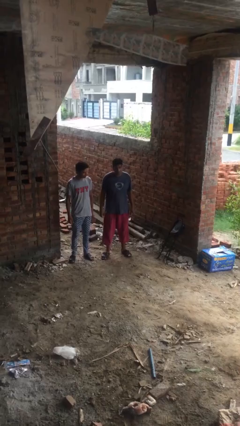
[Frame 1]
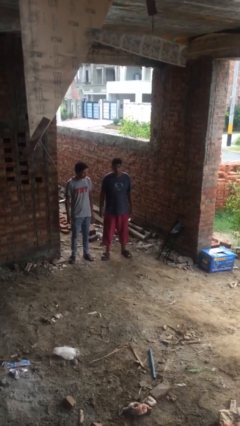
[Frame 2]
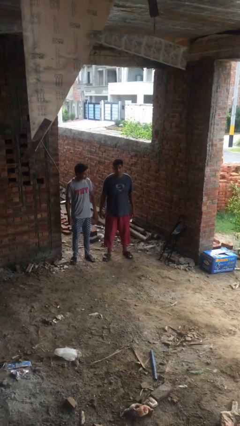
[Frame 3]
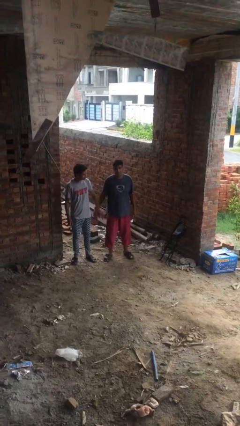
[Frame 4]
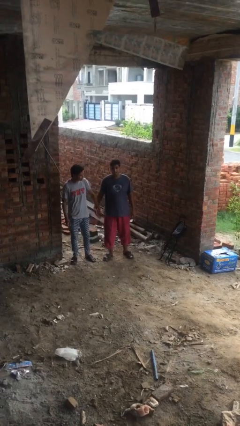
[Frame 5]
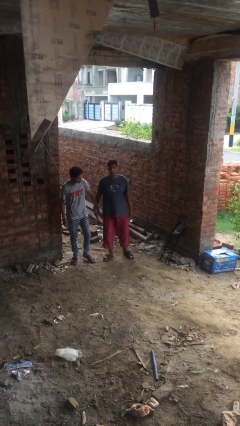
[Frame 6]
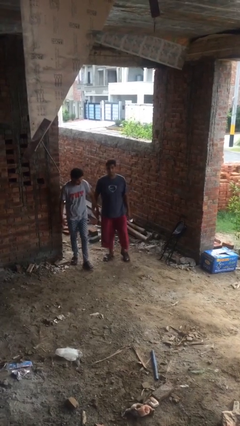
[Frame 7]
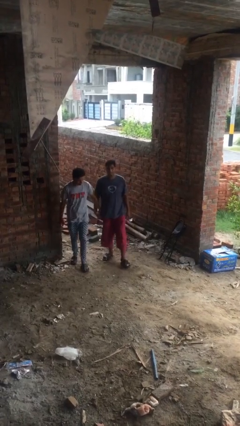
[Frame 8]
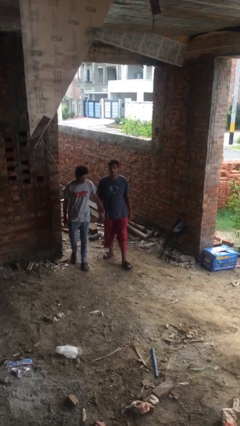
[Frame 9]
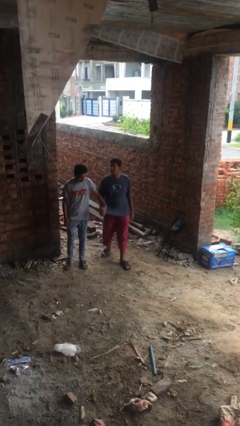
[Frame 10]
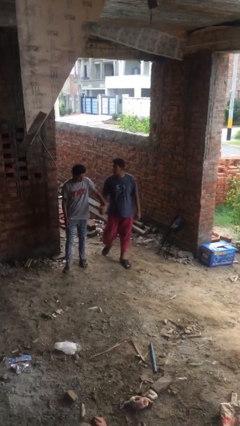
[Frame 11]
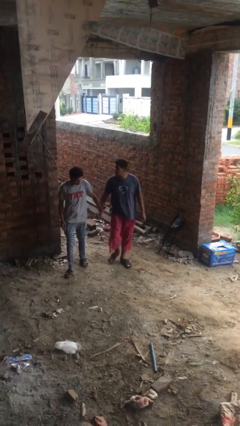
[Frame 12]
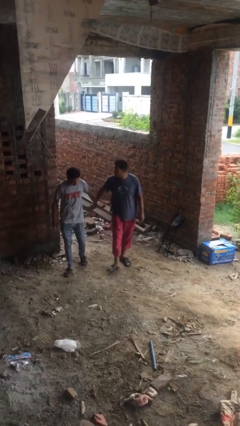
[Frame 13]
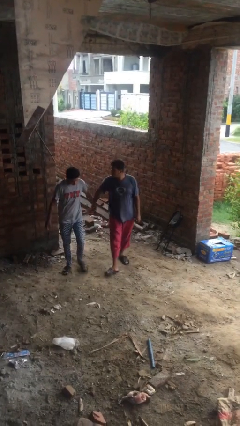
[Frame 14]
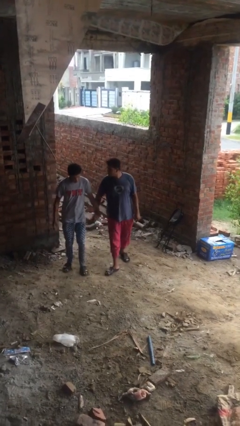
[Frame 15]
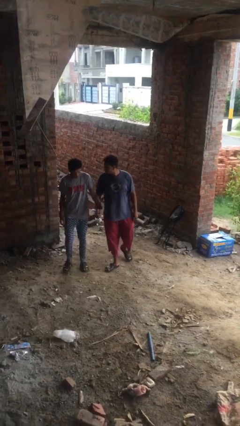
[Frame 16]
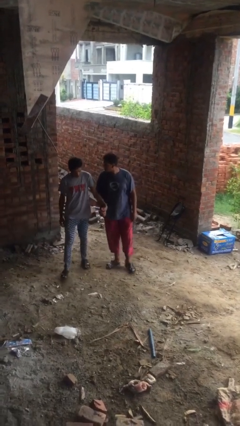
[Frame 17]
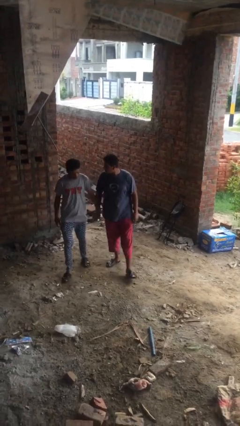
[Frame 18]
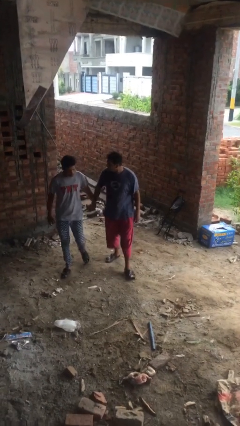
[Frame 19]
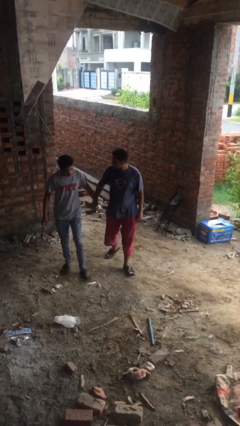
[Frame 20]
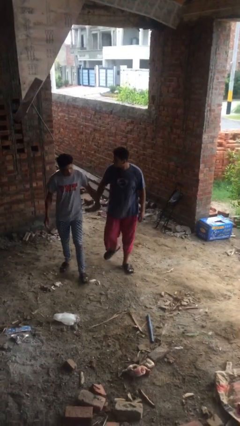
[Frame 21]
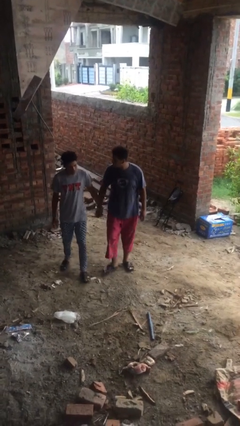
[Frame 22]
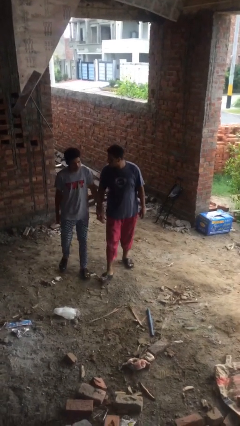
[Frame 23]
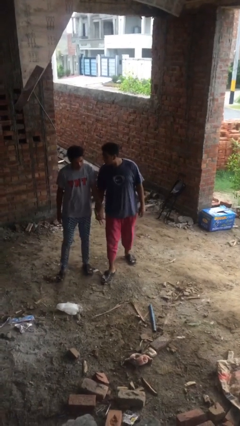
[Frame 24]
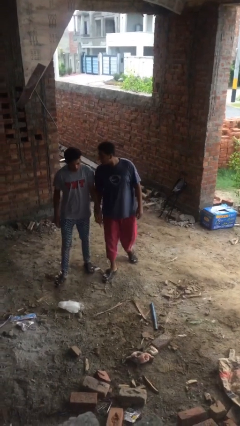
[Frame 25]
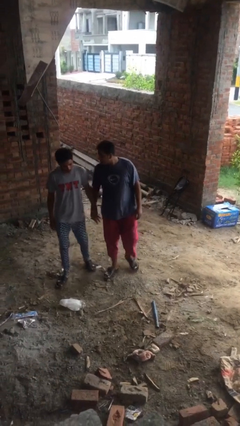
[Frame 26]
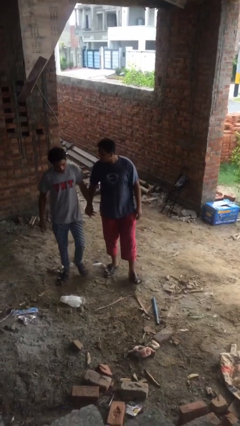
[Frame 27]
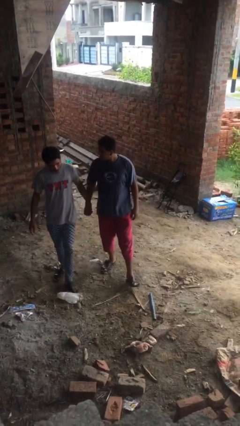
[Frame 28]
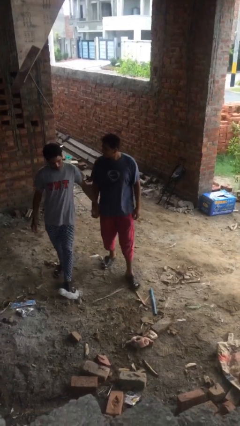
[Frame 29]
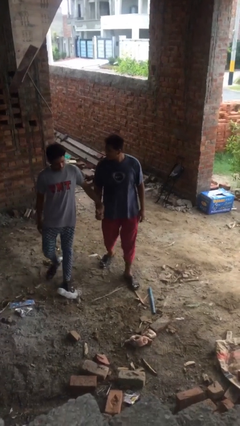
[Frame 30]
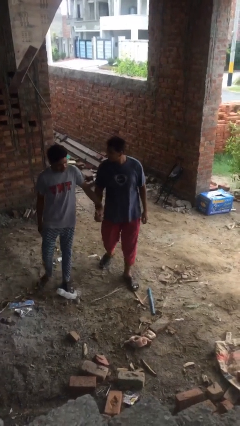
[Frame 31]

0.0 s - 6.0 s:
person holds hand

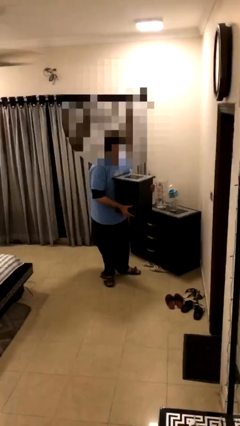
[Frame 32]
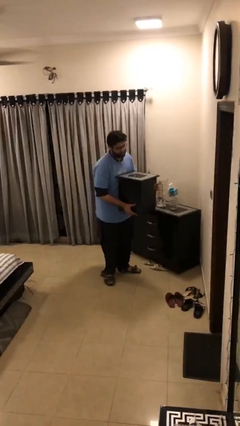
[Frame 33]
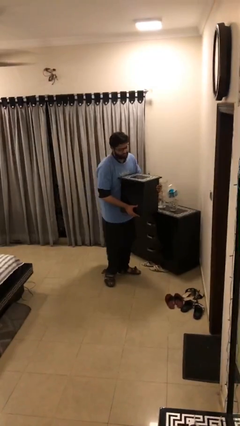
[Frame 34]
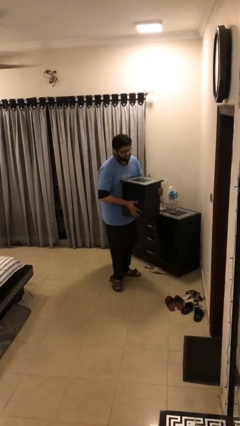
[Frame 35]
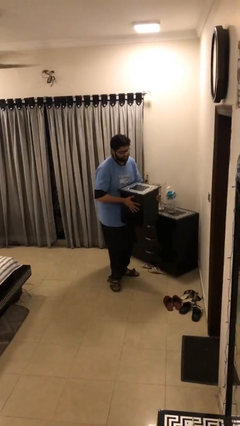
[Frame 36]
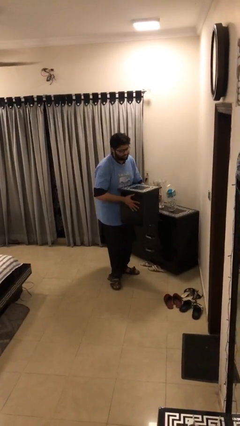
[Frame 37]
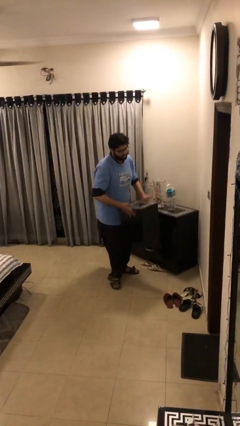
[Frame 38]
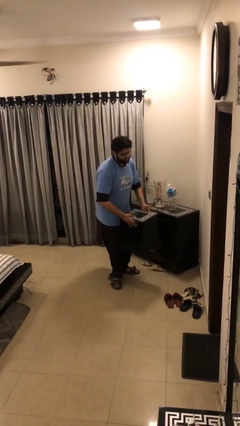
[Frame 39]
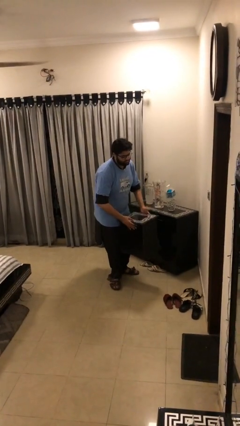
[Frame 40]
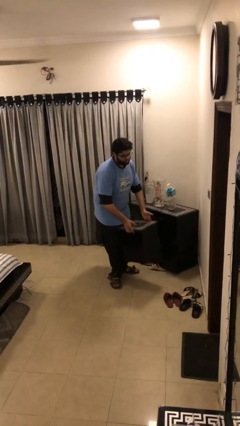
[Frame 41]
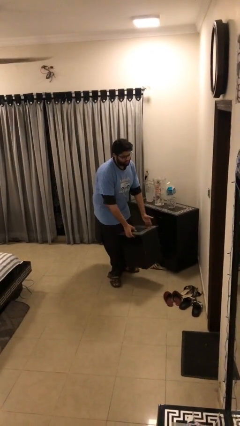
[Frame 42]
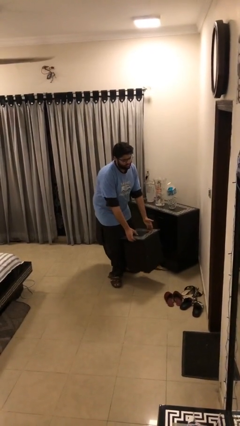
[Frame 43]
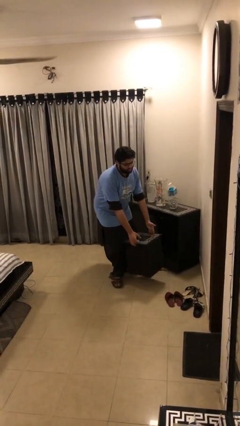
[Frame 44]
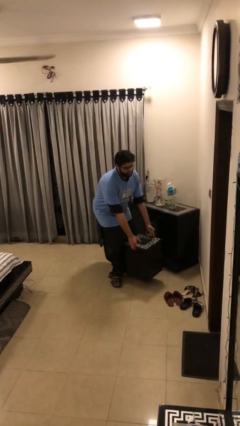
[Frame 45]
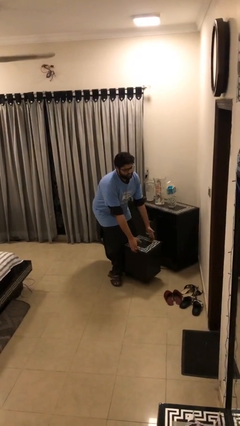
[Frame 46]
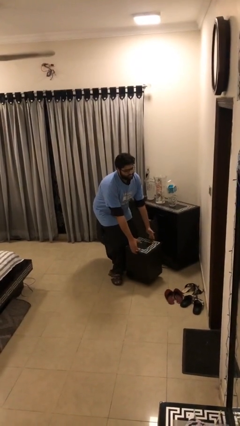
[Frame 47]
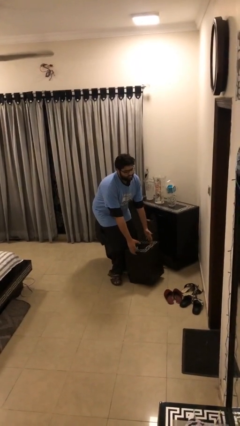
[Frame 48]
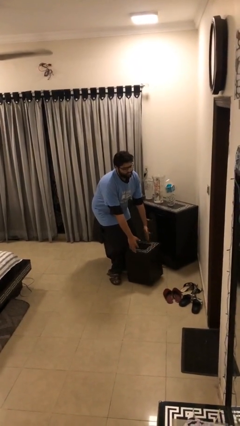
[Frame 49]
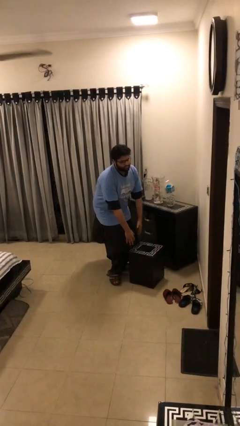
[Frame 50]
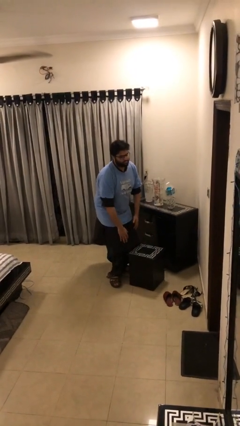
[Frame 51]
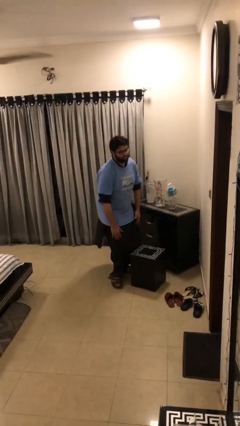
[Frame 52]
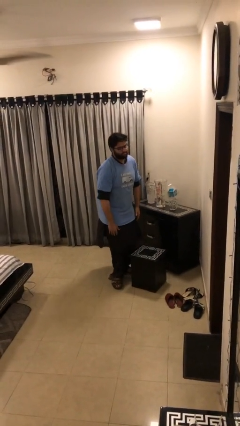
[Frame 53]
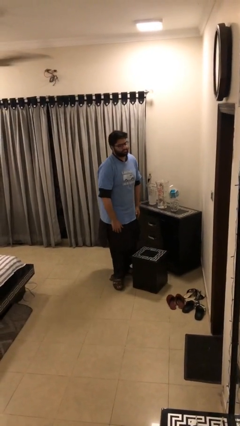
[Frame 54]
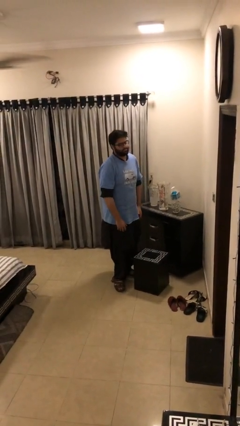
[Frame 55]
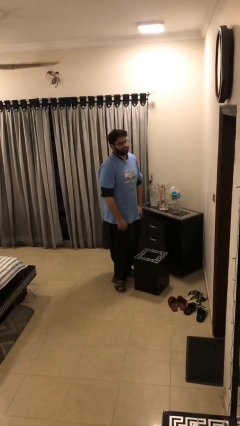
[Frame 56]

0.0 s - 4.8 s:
person puts down object on floor

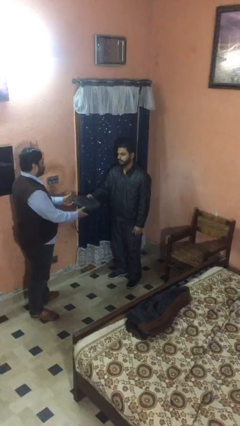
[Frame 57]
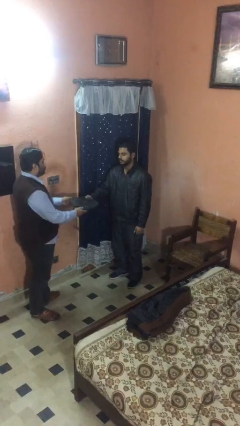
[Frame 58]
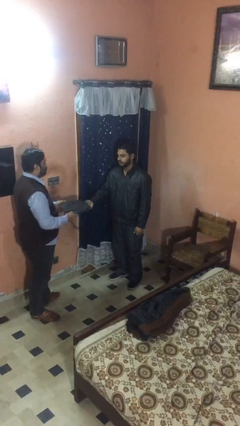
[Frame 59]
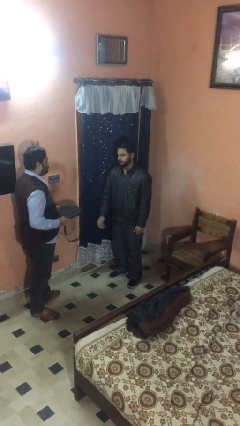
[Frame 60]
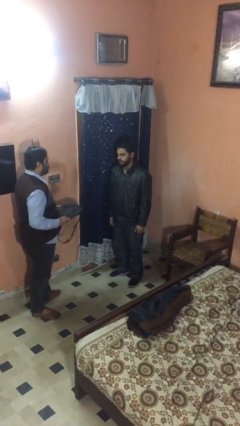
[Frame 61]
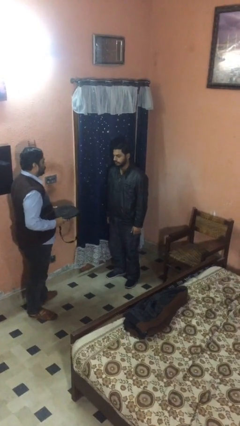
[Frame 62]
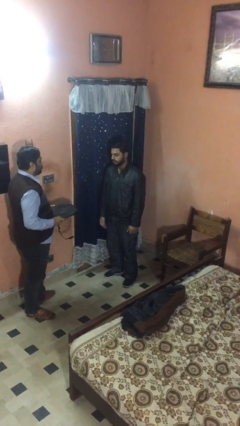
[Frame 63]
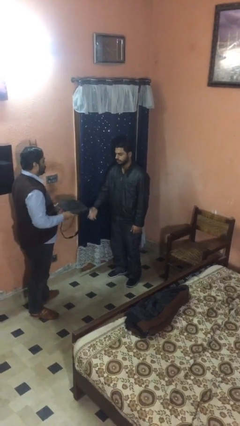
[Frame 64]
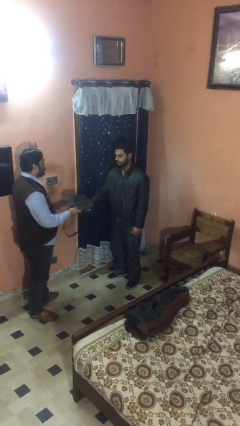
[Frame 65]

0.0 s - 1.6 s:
person transfers object to person

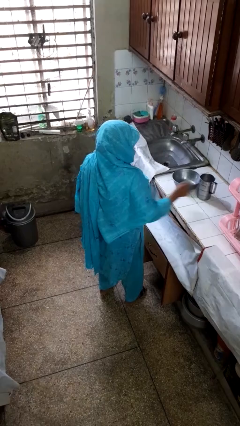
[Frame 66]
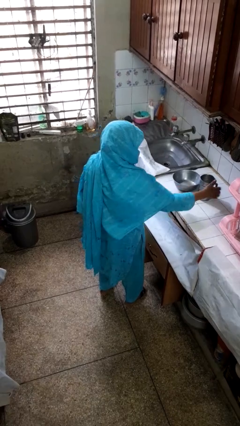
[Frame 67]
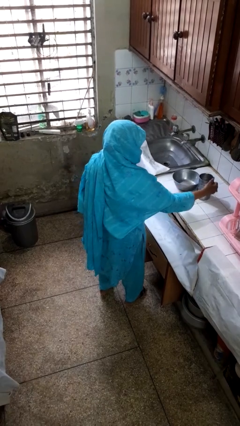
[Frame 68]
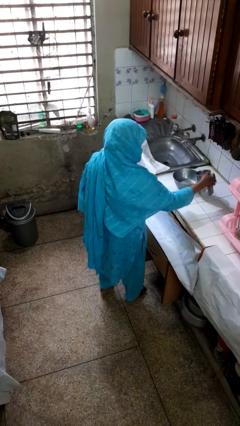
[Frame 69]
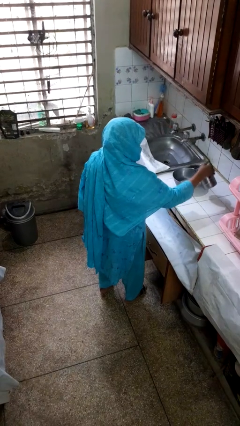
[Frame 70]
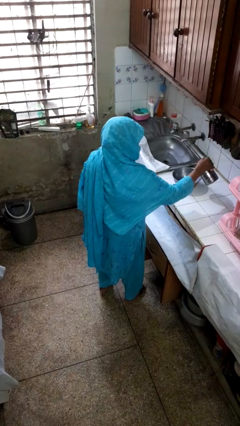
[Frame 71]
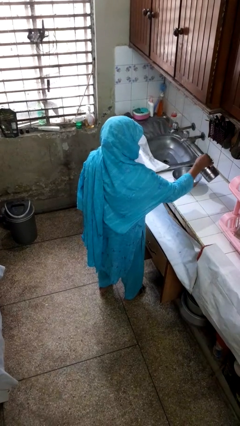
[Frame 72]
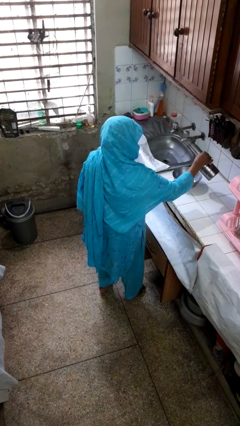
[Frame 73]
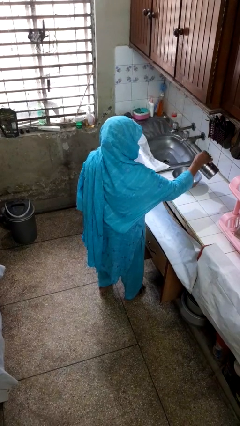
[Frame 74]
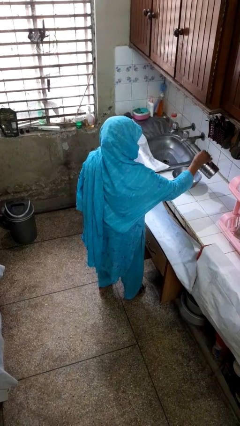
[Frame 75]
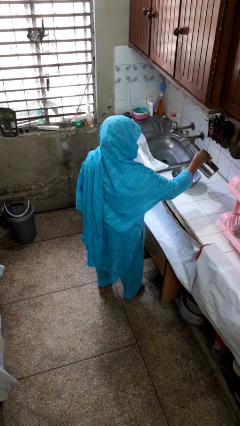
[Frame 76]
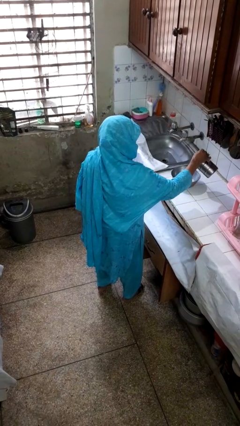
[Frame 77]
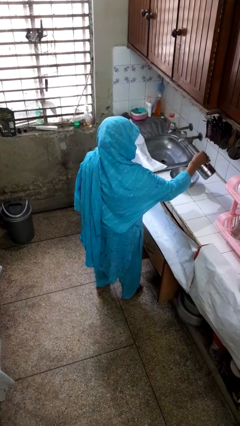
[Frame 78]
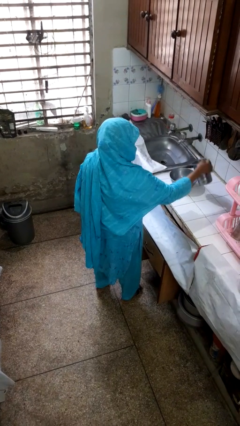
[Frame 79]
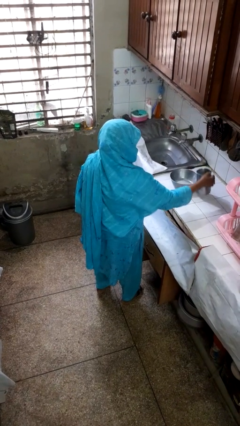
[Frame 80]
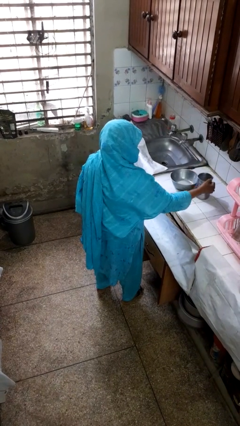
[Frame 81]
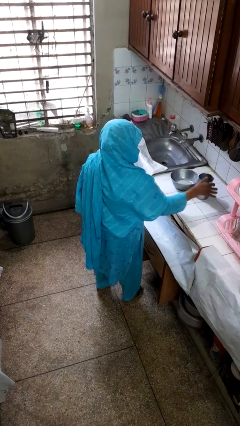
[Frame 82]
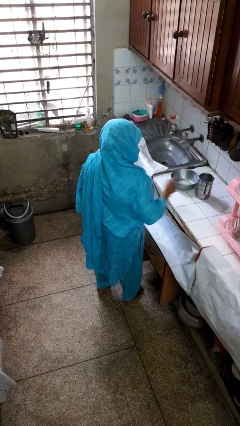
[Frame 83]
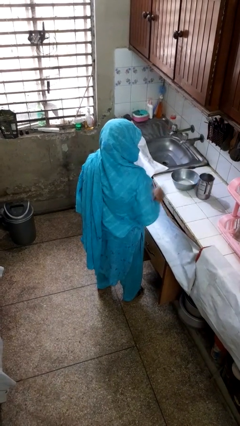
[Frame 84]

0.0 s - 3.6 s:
person pours into bowl

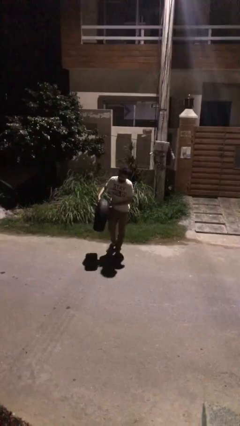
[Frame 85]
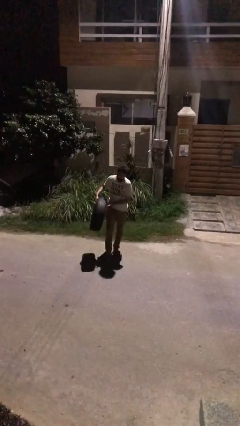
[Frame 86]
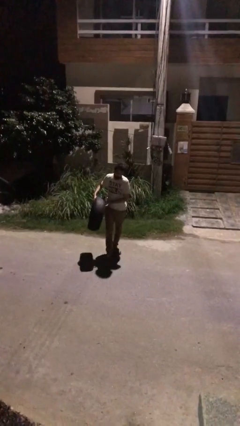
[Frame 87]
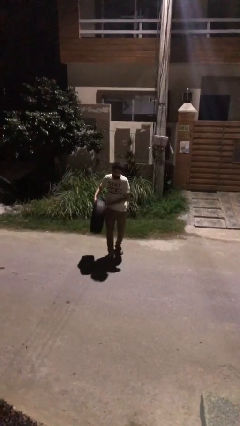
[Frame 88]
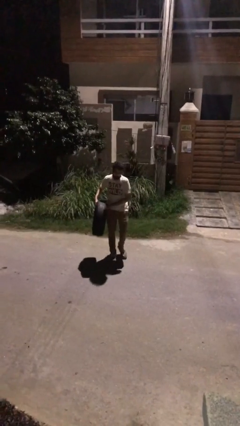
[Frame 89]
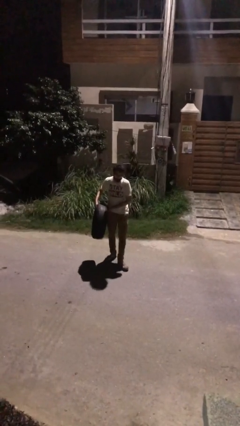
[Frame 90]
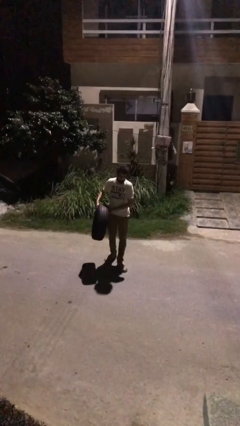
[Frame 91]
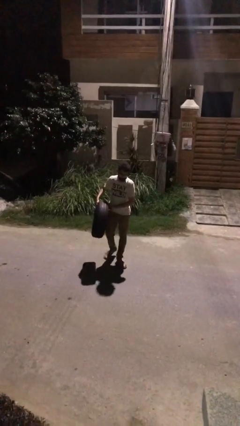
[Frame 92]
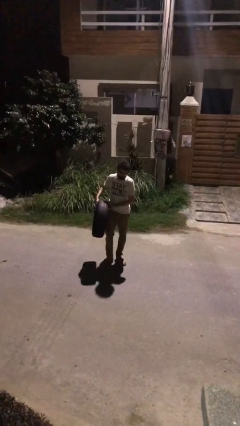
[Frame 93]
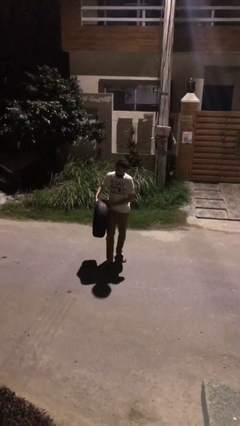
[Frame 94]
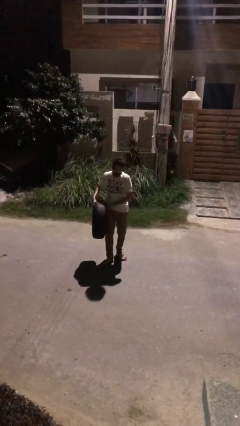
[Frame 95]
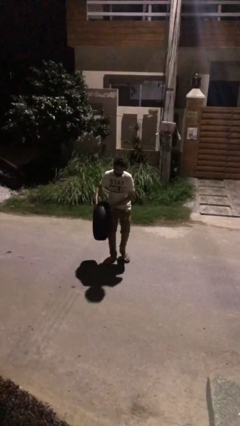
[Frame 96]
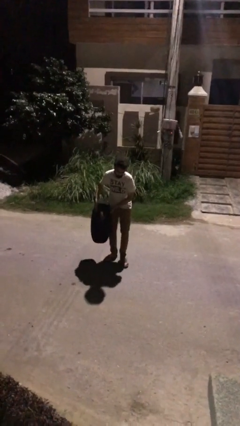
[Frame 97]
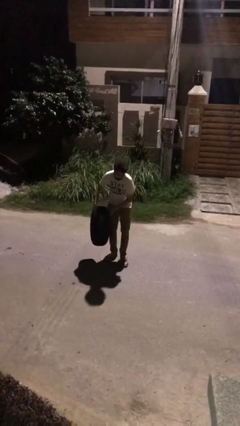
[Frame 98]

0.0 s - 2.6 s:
person carries heavy object
